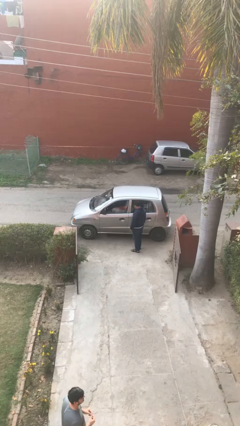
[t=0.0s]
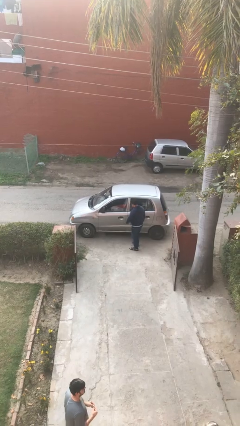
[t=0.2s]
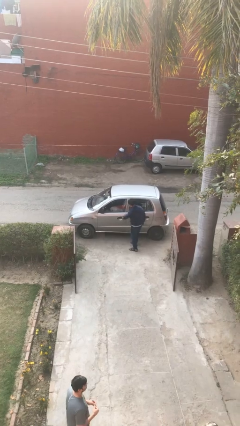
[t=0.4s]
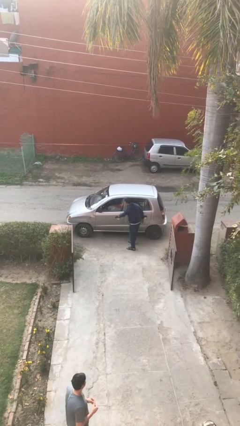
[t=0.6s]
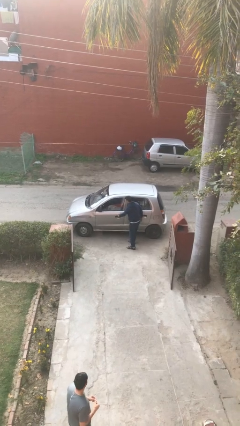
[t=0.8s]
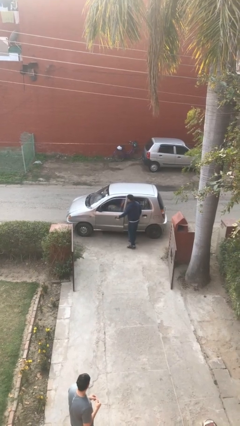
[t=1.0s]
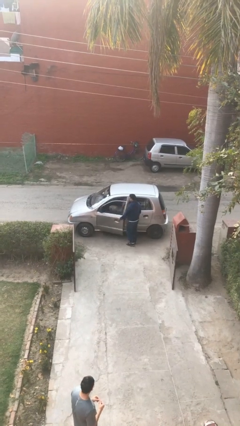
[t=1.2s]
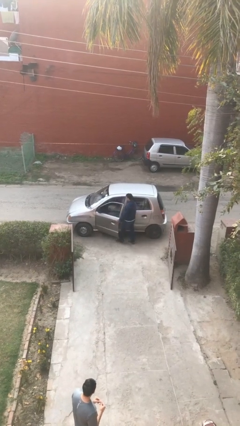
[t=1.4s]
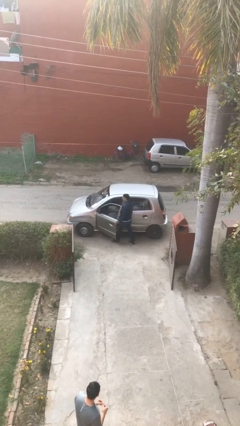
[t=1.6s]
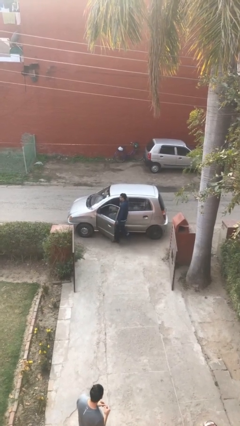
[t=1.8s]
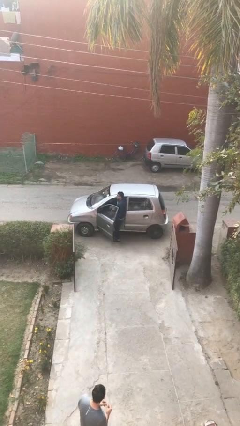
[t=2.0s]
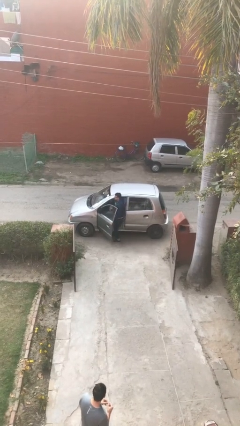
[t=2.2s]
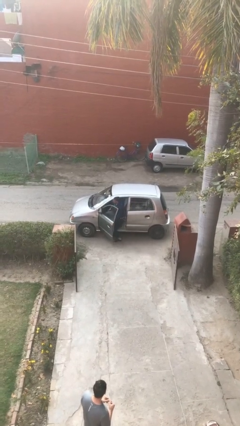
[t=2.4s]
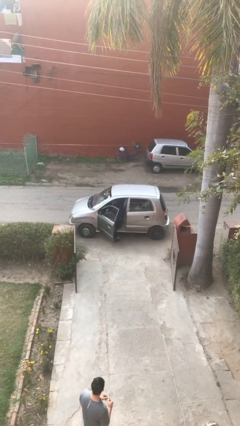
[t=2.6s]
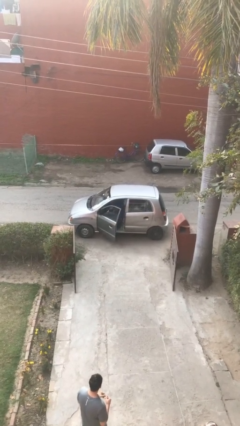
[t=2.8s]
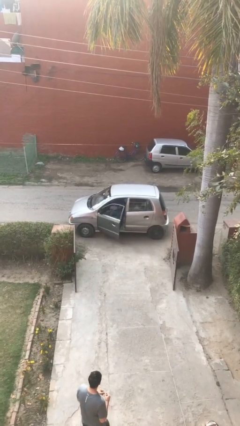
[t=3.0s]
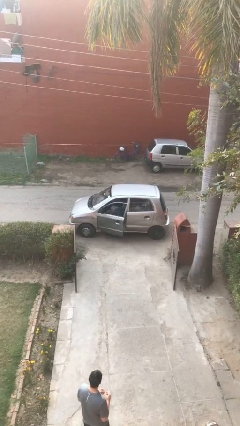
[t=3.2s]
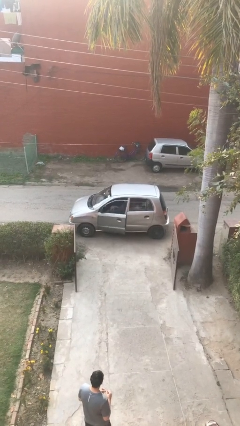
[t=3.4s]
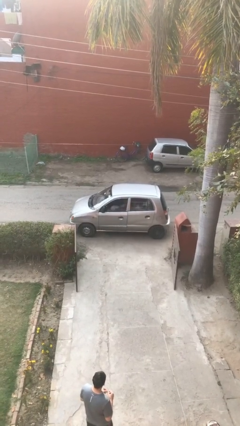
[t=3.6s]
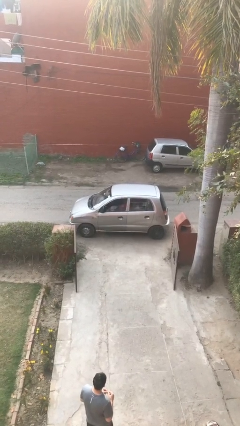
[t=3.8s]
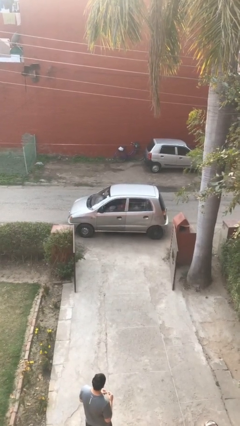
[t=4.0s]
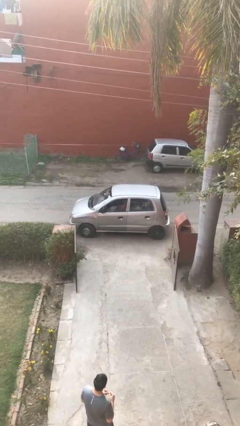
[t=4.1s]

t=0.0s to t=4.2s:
car picks up person

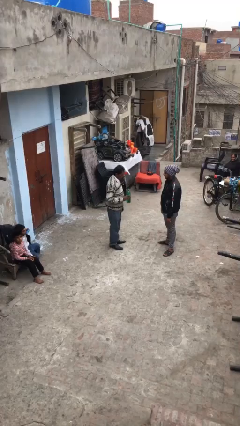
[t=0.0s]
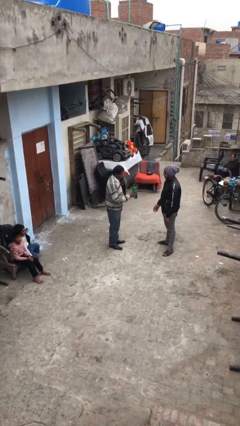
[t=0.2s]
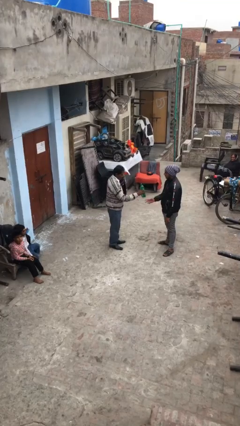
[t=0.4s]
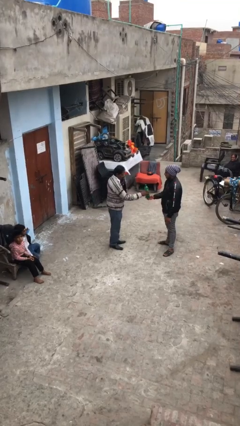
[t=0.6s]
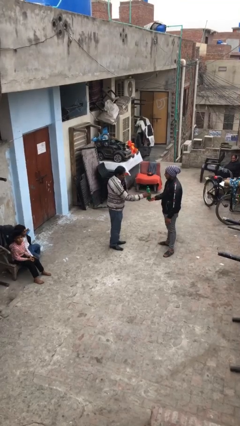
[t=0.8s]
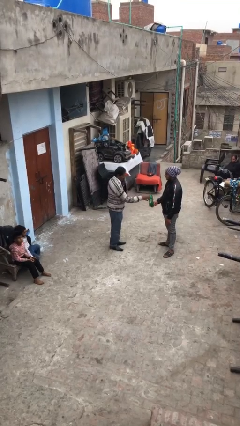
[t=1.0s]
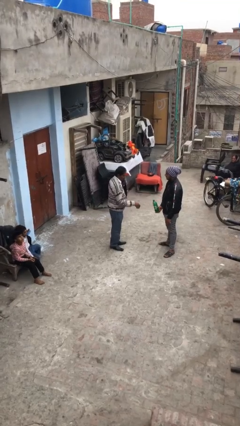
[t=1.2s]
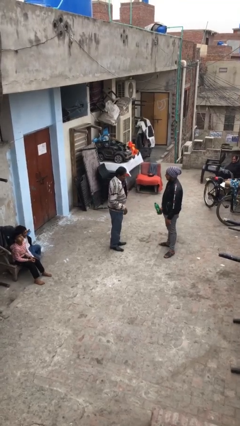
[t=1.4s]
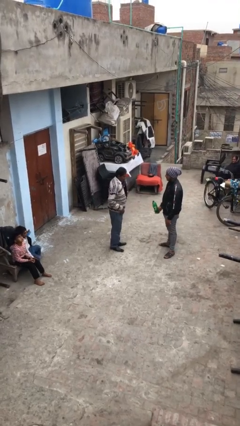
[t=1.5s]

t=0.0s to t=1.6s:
person transfers object to person

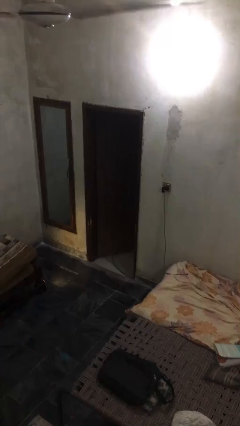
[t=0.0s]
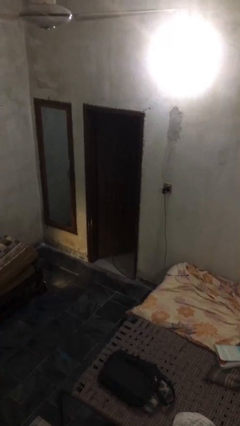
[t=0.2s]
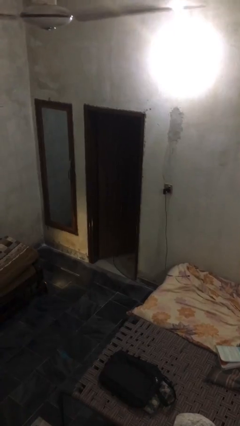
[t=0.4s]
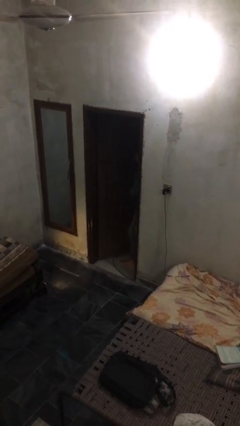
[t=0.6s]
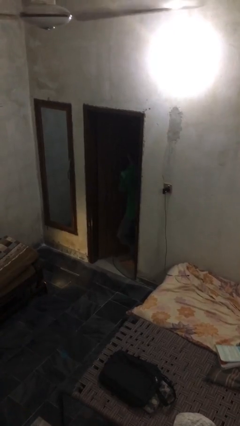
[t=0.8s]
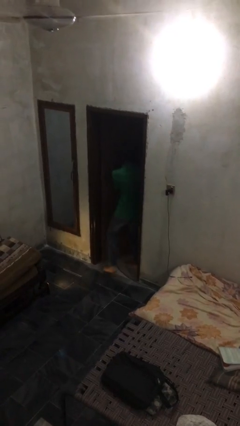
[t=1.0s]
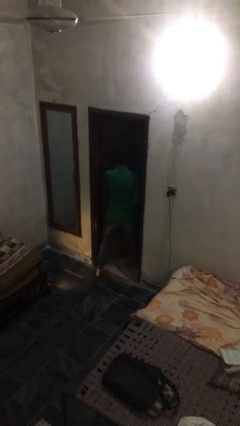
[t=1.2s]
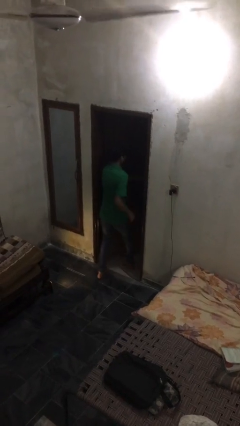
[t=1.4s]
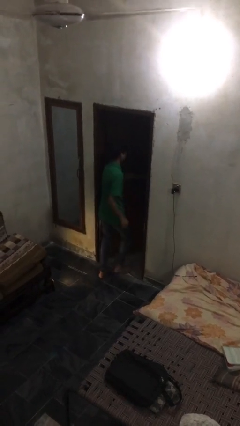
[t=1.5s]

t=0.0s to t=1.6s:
person enters scene through structure

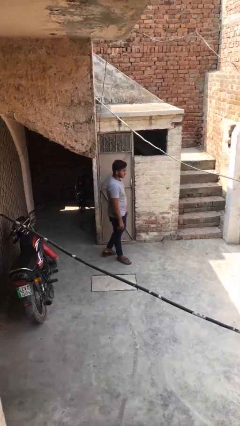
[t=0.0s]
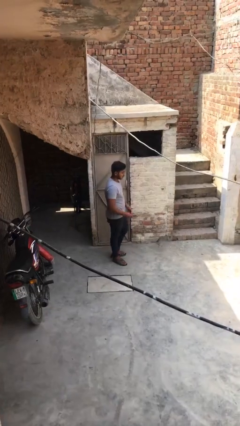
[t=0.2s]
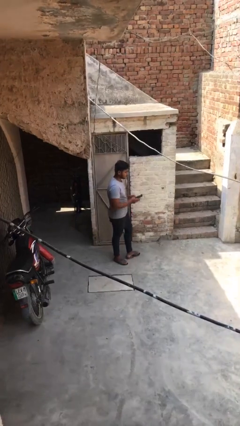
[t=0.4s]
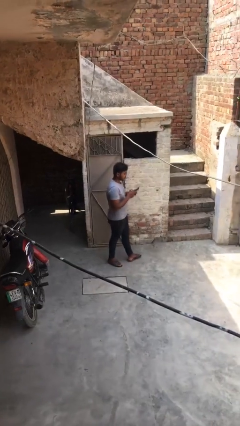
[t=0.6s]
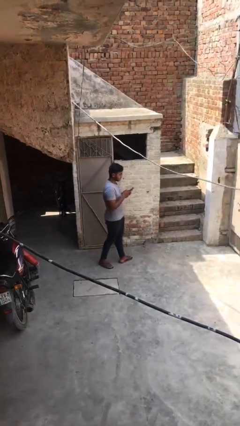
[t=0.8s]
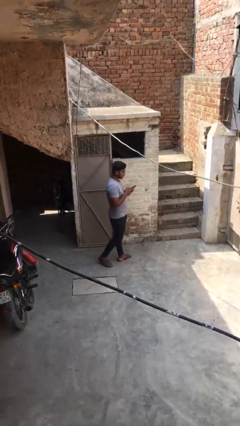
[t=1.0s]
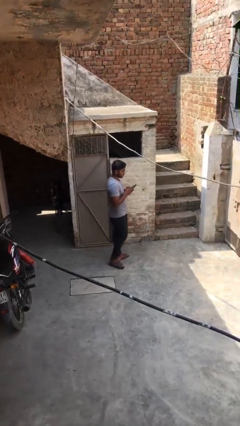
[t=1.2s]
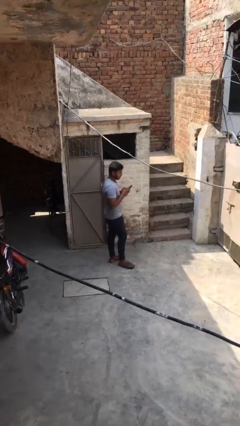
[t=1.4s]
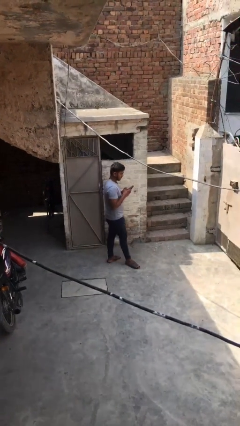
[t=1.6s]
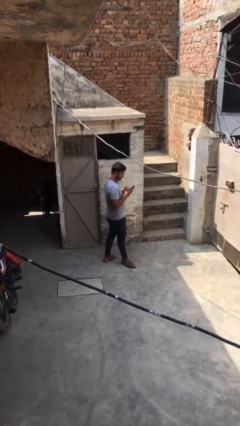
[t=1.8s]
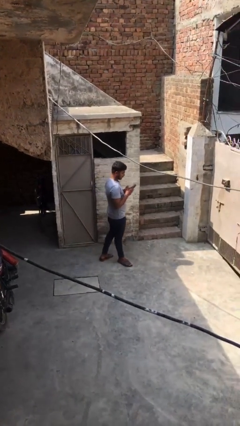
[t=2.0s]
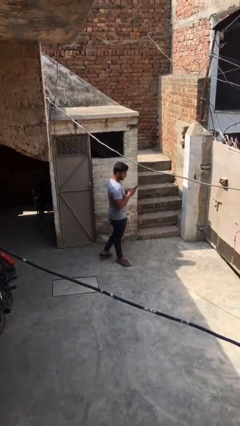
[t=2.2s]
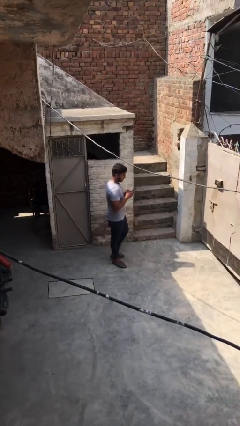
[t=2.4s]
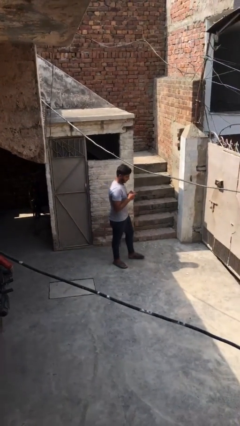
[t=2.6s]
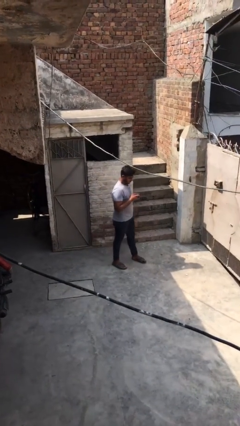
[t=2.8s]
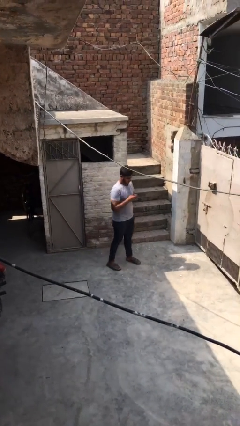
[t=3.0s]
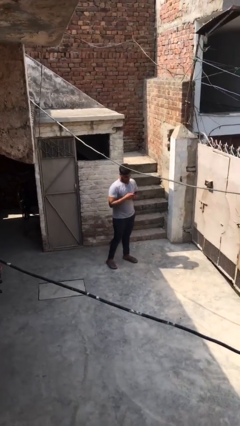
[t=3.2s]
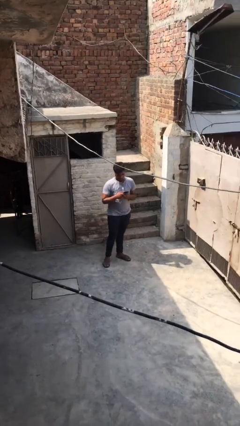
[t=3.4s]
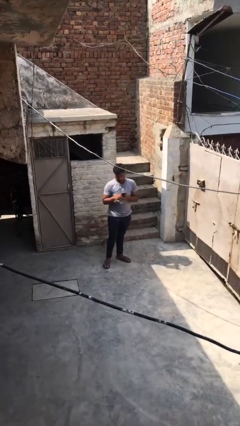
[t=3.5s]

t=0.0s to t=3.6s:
person texts on phone

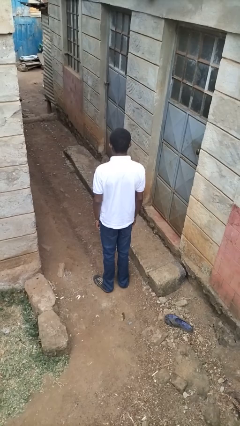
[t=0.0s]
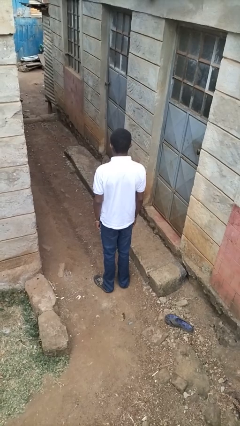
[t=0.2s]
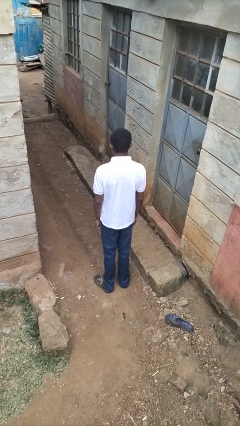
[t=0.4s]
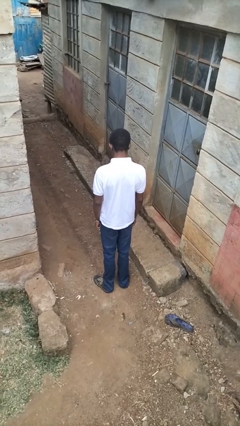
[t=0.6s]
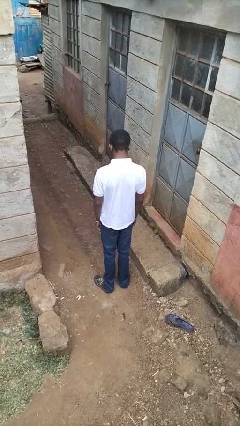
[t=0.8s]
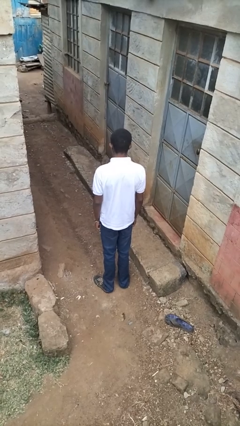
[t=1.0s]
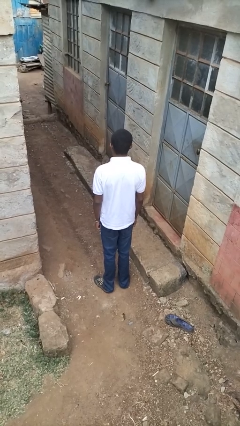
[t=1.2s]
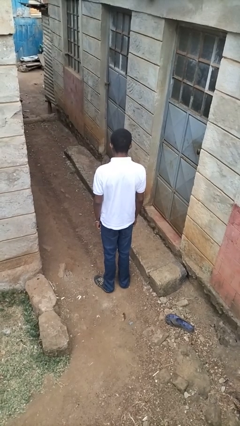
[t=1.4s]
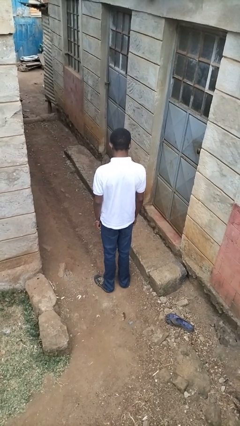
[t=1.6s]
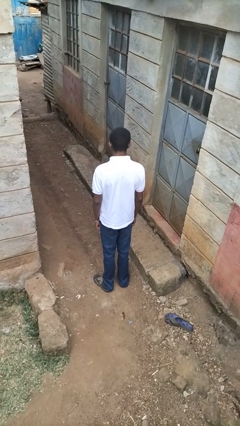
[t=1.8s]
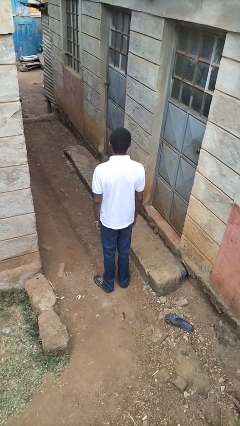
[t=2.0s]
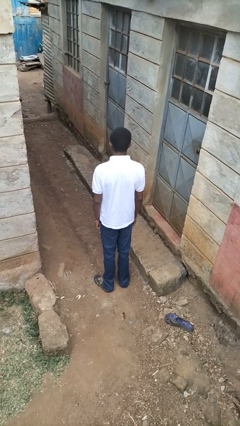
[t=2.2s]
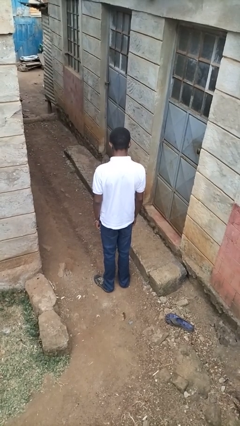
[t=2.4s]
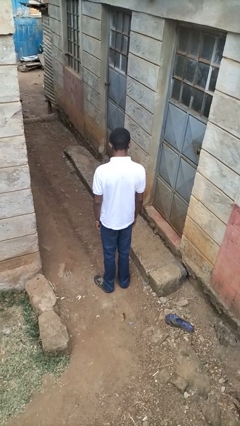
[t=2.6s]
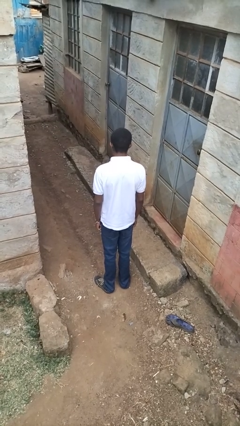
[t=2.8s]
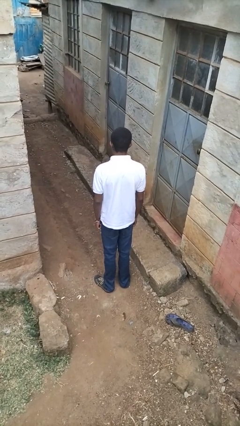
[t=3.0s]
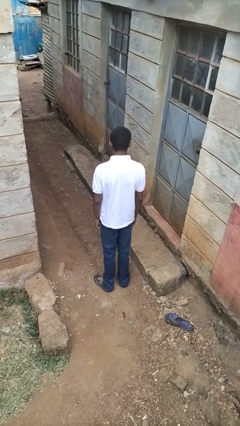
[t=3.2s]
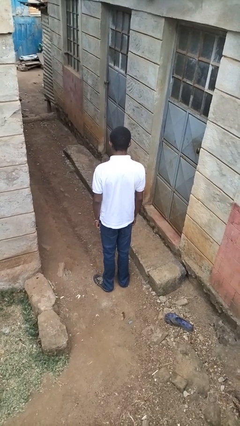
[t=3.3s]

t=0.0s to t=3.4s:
person nods head

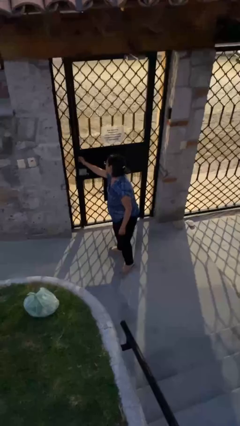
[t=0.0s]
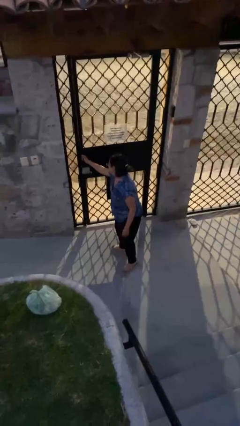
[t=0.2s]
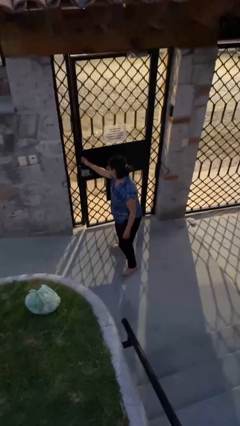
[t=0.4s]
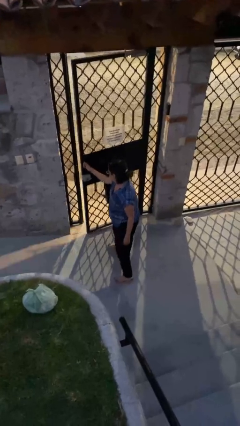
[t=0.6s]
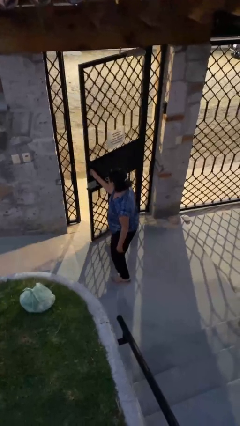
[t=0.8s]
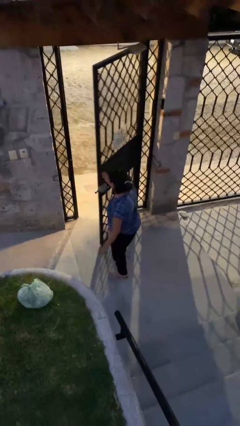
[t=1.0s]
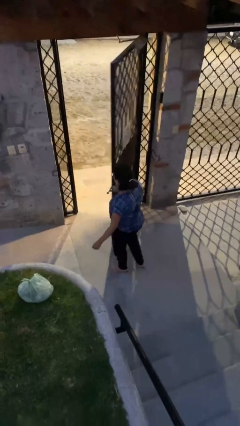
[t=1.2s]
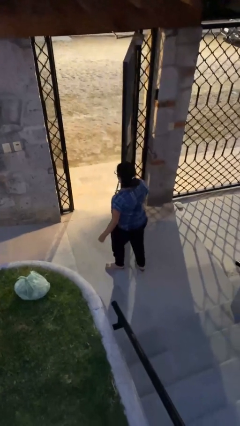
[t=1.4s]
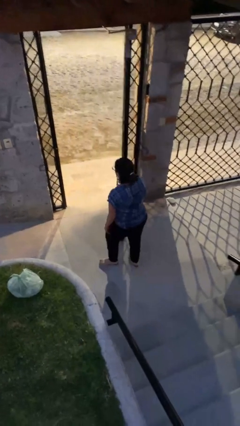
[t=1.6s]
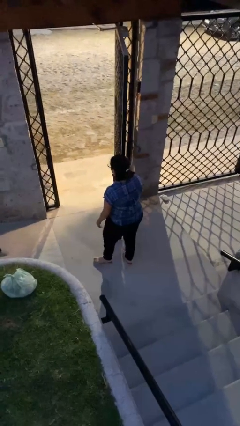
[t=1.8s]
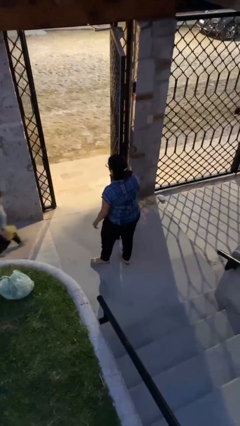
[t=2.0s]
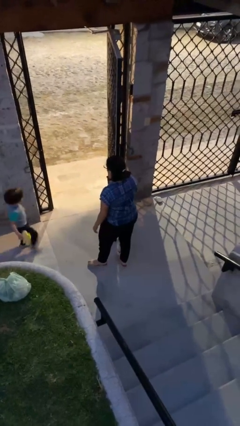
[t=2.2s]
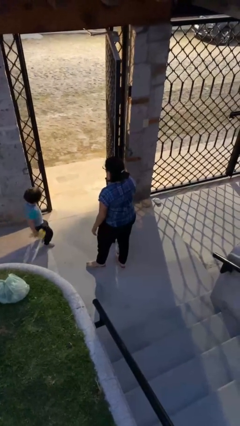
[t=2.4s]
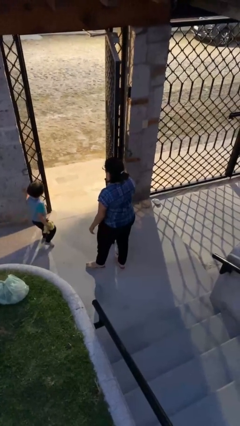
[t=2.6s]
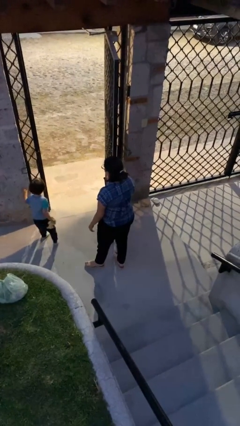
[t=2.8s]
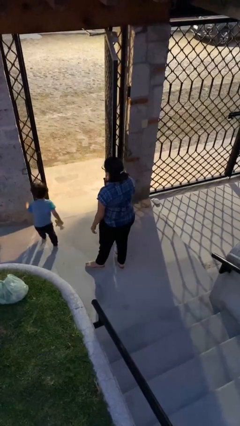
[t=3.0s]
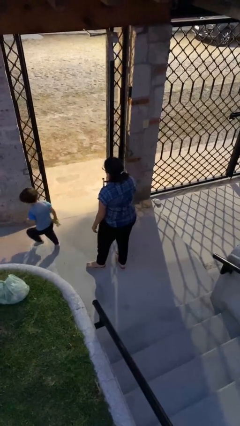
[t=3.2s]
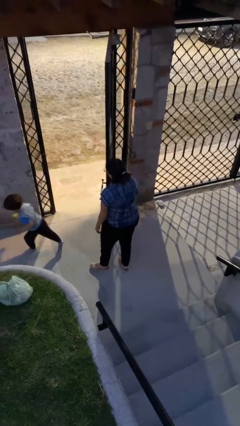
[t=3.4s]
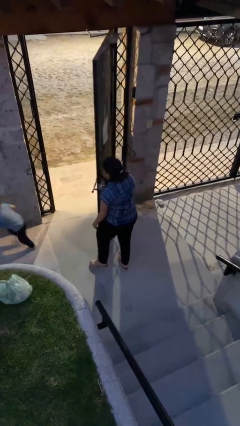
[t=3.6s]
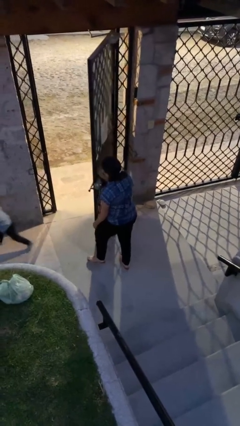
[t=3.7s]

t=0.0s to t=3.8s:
person opens facility door
